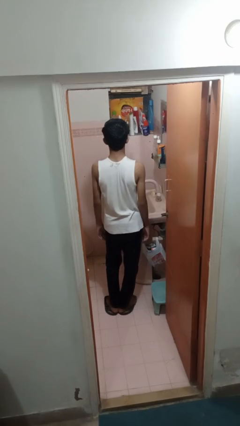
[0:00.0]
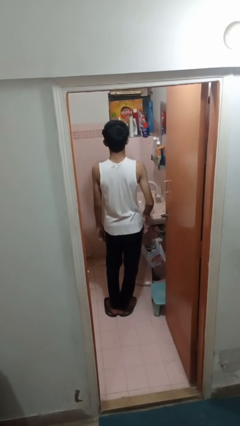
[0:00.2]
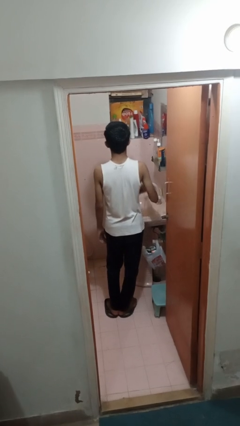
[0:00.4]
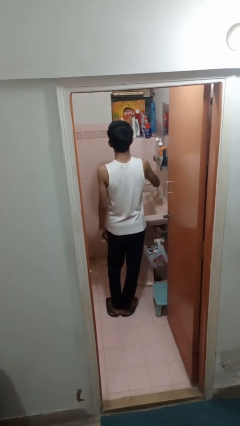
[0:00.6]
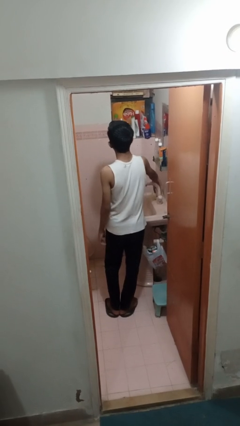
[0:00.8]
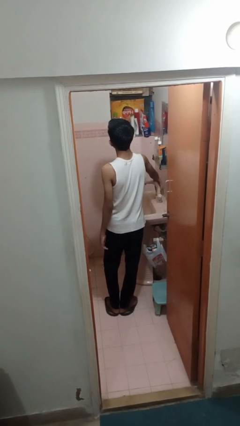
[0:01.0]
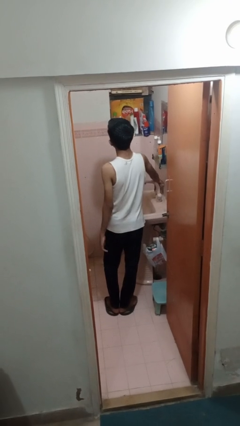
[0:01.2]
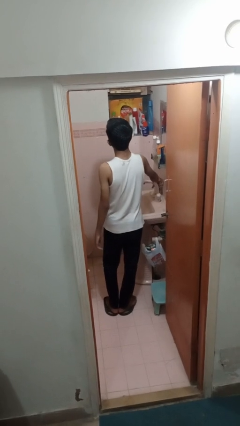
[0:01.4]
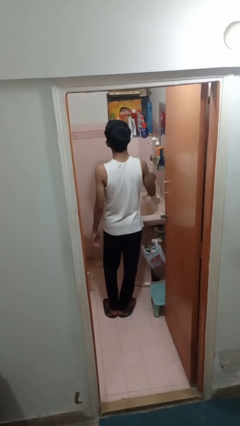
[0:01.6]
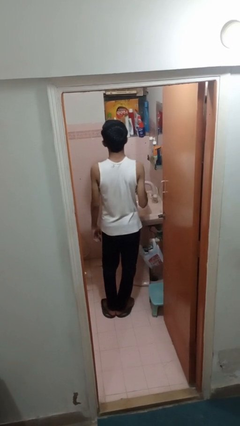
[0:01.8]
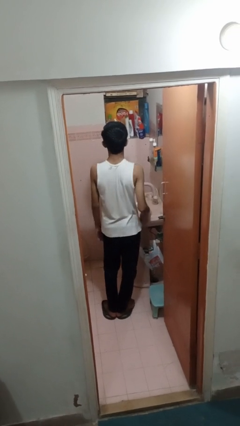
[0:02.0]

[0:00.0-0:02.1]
person turns off faucet

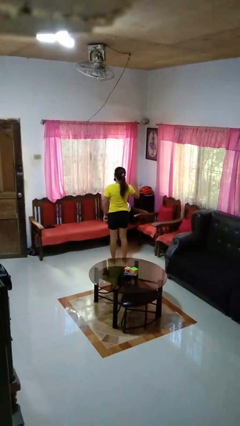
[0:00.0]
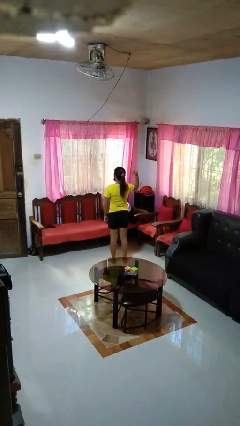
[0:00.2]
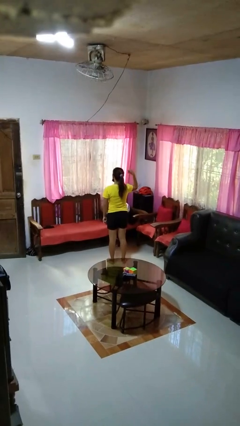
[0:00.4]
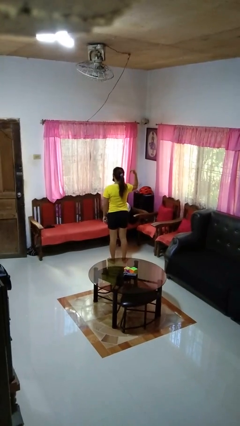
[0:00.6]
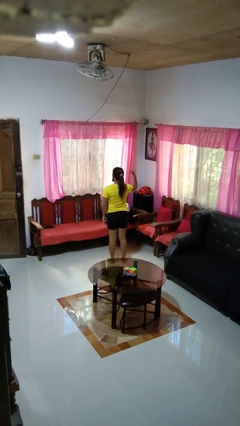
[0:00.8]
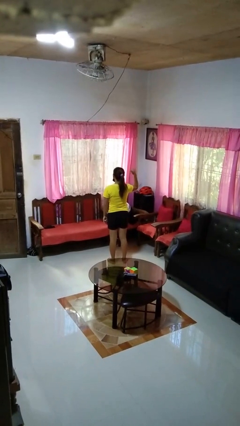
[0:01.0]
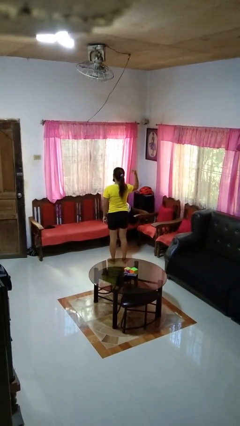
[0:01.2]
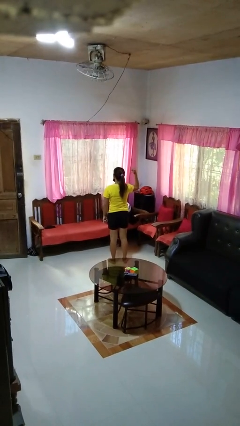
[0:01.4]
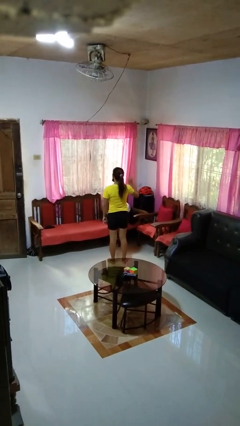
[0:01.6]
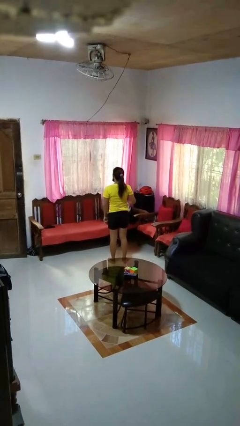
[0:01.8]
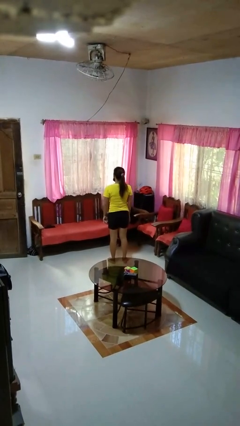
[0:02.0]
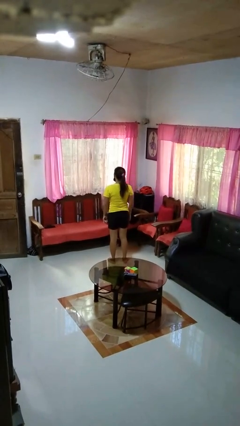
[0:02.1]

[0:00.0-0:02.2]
person gestures hang loose

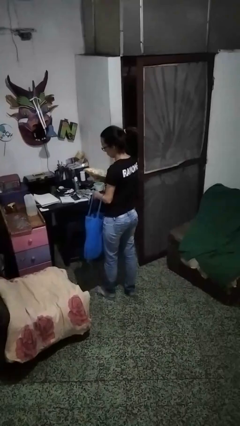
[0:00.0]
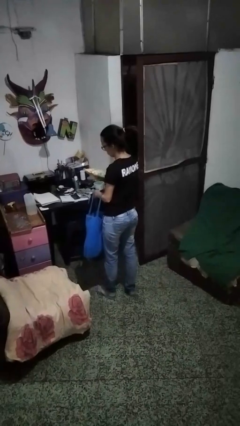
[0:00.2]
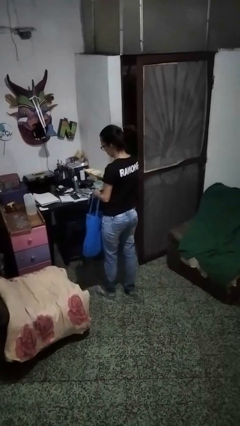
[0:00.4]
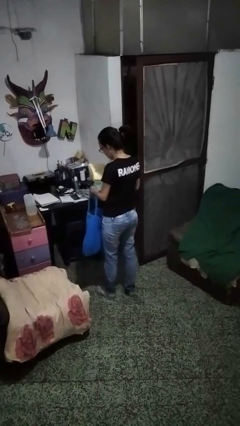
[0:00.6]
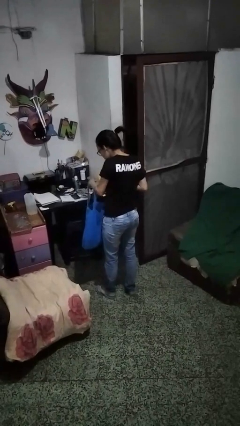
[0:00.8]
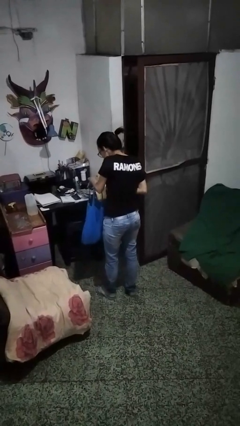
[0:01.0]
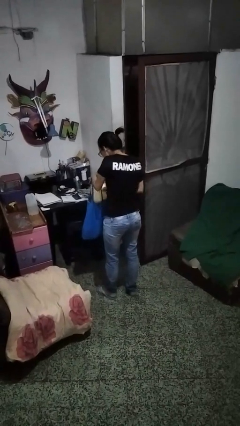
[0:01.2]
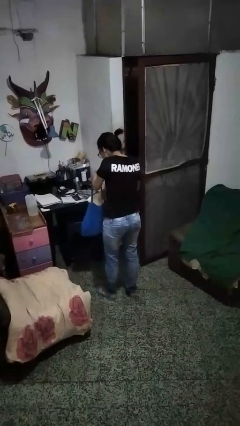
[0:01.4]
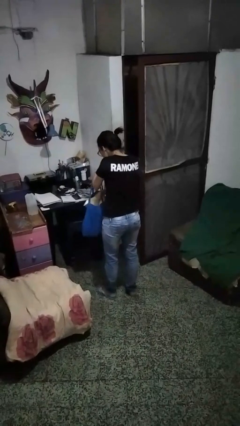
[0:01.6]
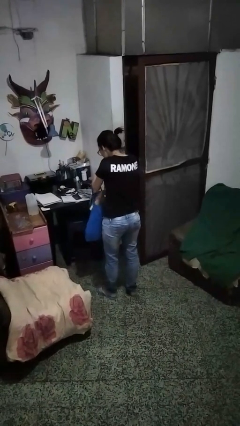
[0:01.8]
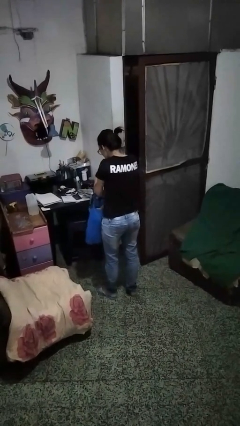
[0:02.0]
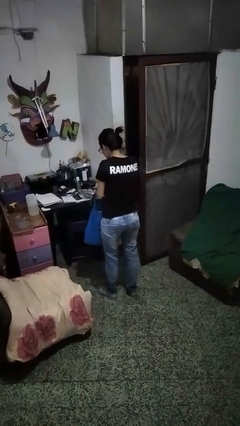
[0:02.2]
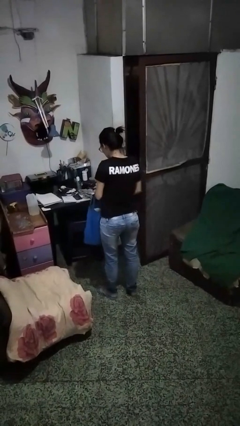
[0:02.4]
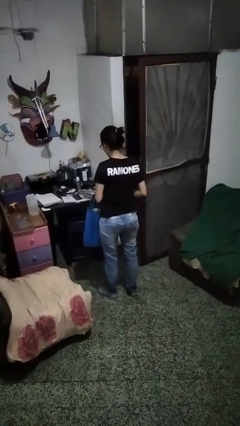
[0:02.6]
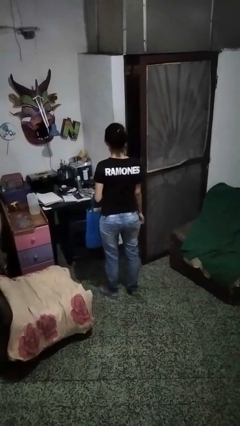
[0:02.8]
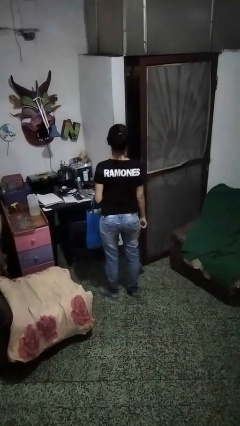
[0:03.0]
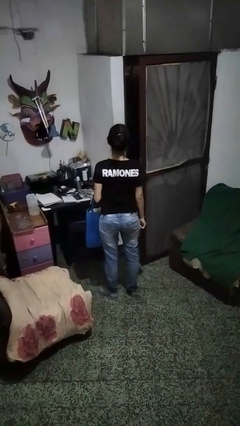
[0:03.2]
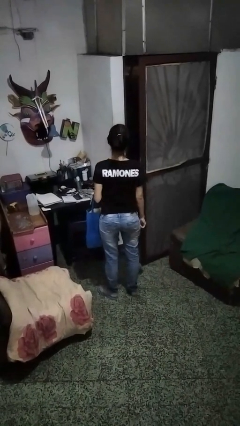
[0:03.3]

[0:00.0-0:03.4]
person puts object into bag

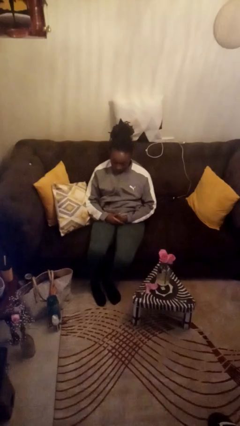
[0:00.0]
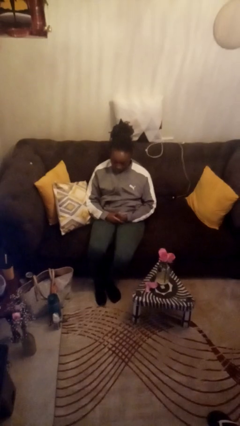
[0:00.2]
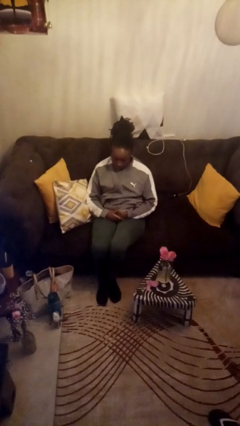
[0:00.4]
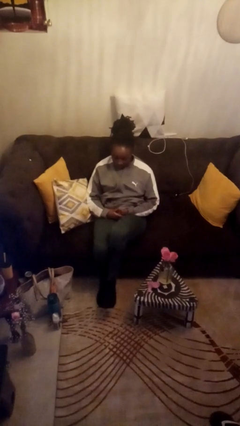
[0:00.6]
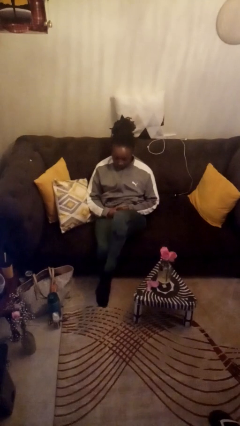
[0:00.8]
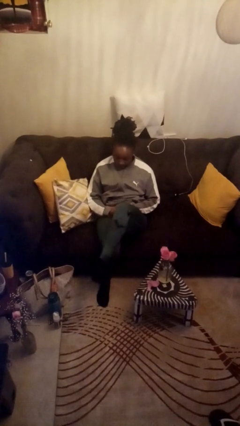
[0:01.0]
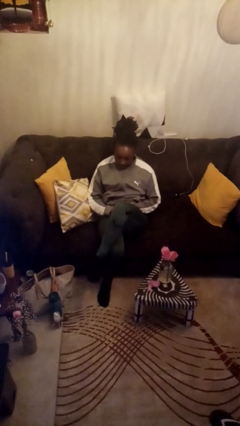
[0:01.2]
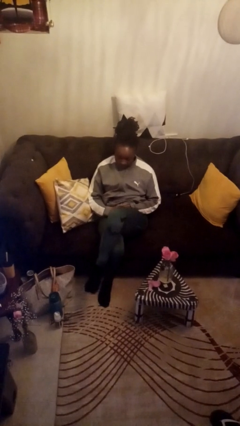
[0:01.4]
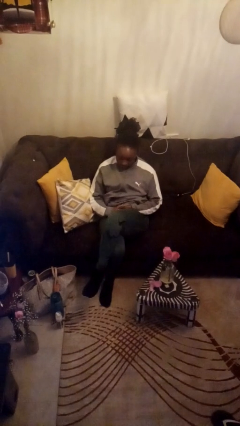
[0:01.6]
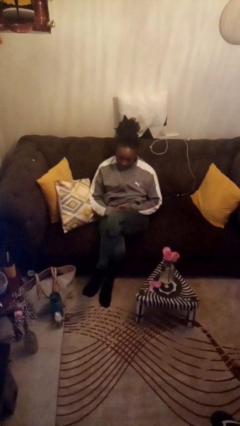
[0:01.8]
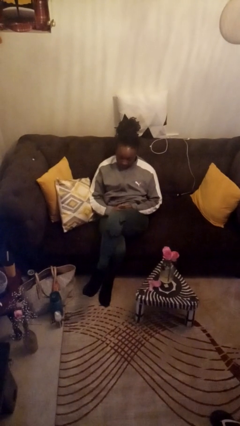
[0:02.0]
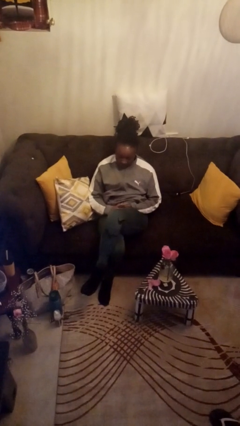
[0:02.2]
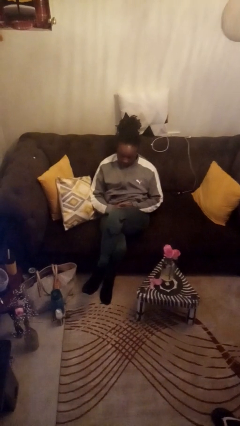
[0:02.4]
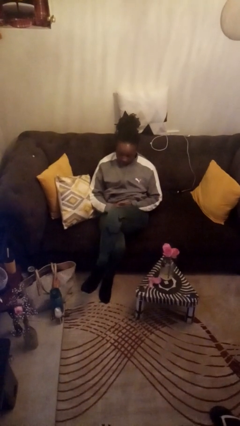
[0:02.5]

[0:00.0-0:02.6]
person crosses legs

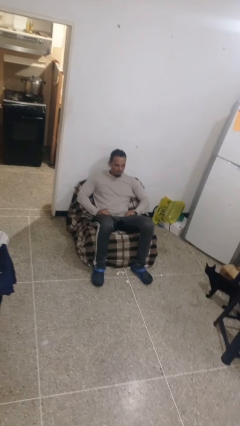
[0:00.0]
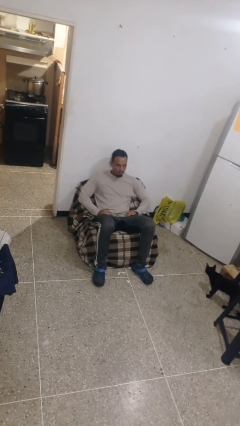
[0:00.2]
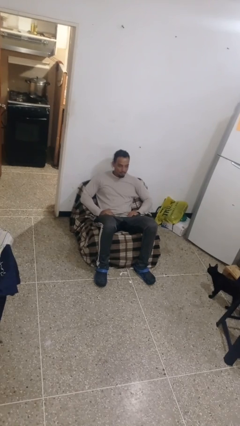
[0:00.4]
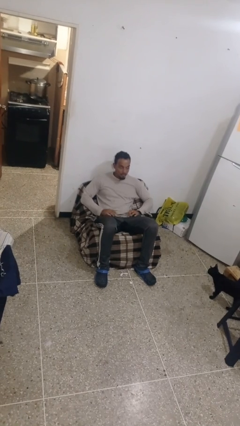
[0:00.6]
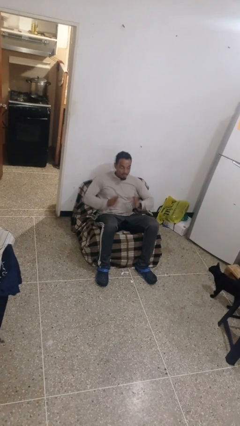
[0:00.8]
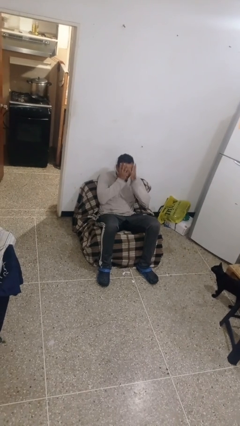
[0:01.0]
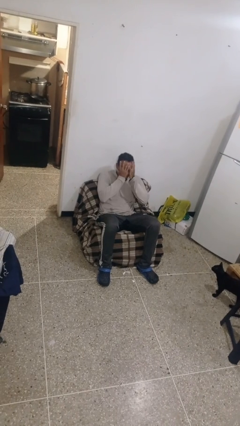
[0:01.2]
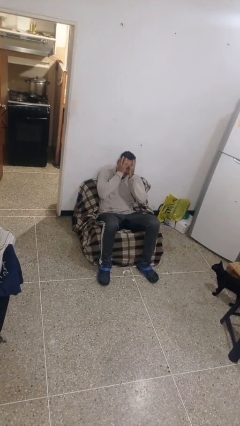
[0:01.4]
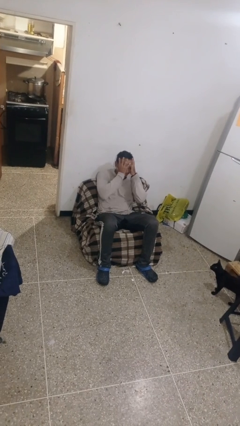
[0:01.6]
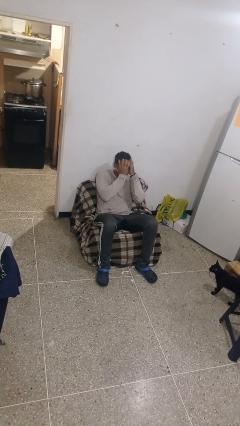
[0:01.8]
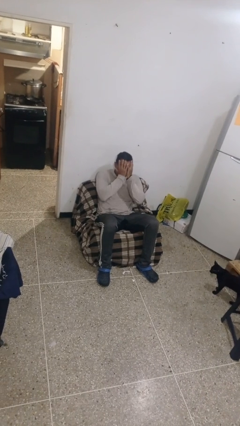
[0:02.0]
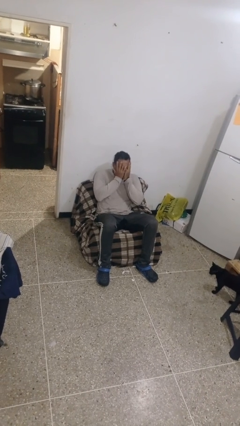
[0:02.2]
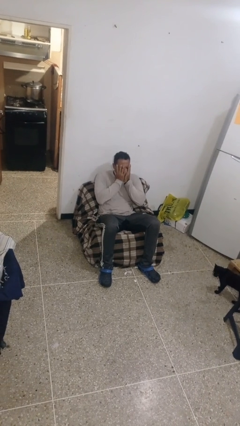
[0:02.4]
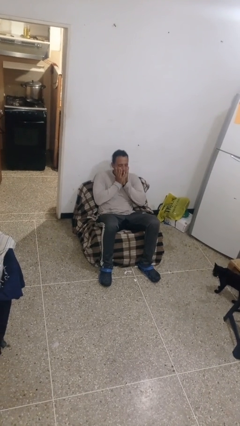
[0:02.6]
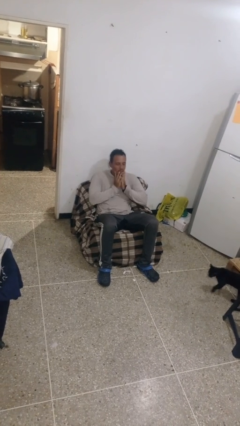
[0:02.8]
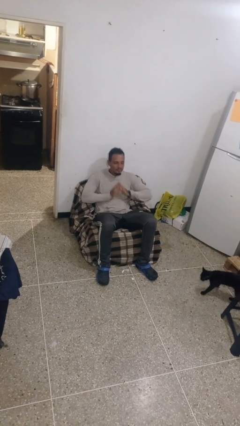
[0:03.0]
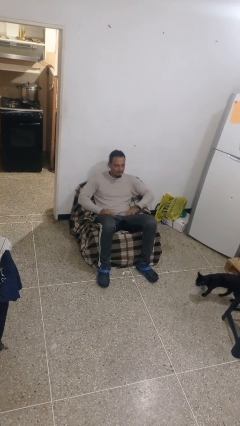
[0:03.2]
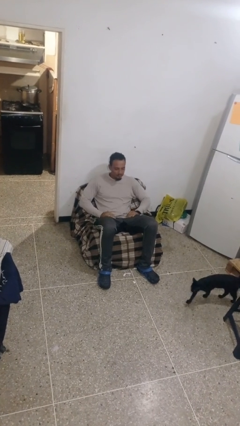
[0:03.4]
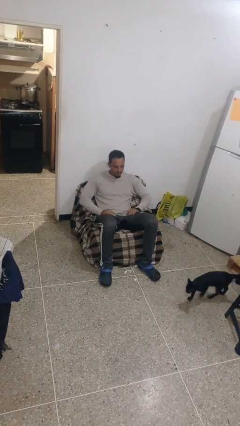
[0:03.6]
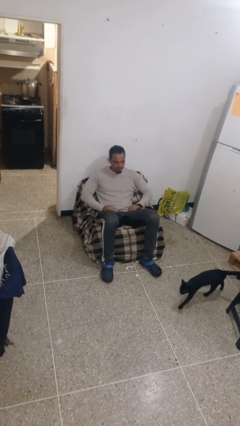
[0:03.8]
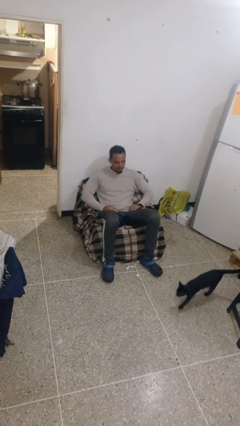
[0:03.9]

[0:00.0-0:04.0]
person covers face with hands

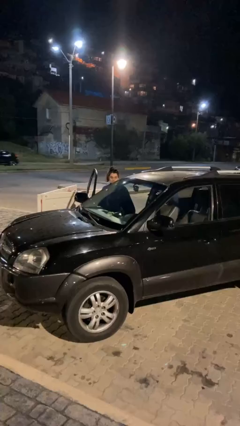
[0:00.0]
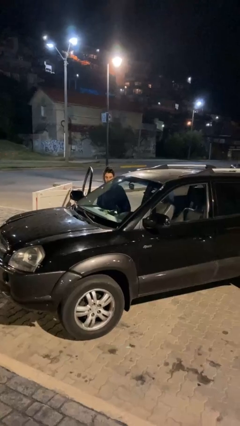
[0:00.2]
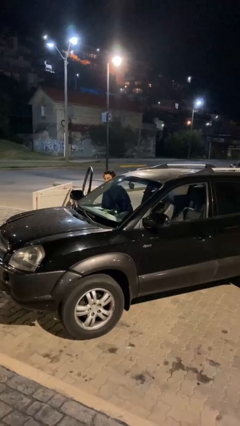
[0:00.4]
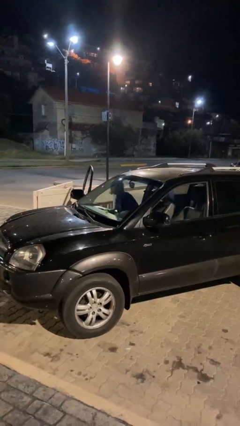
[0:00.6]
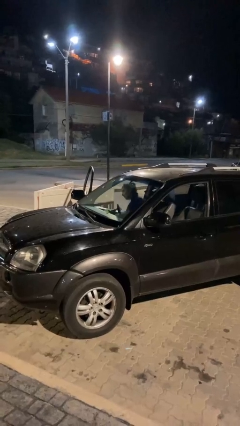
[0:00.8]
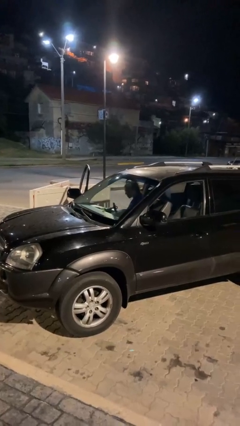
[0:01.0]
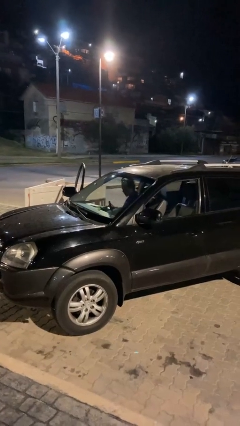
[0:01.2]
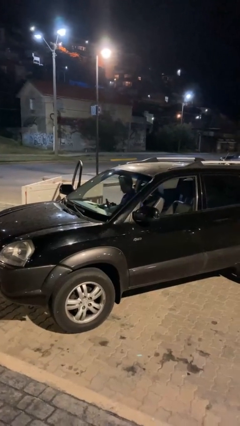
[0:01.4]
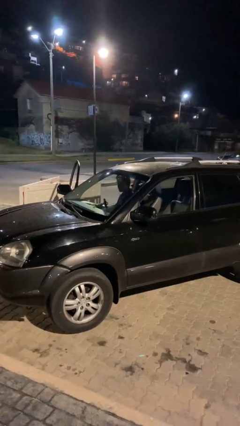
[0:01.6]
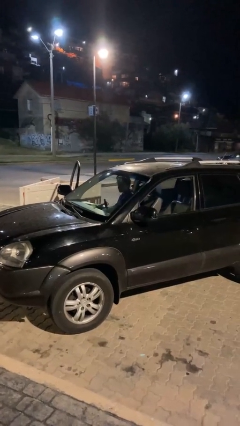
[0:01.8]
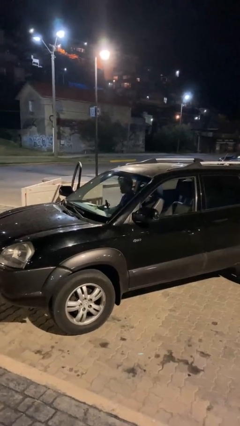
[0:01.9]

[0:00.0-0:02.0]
person enters car

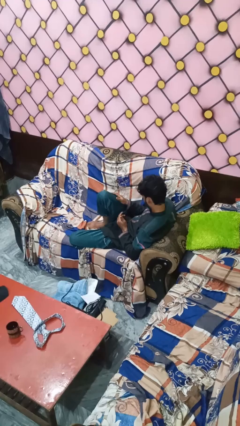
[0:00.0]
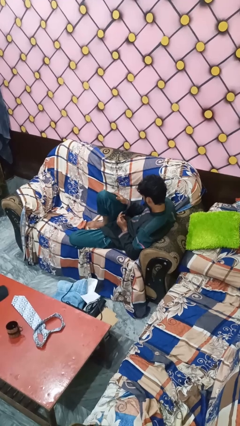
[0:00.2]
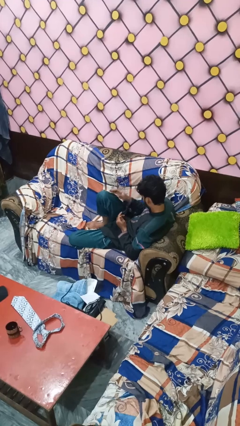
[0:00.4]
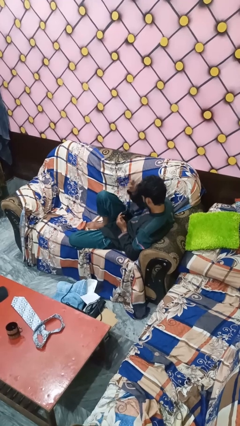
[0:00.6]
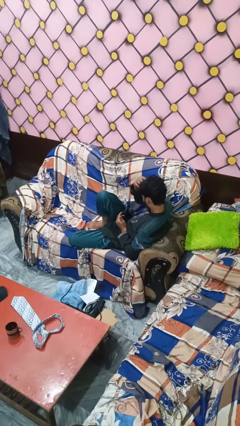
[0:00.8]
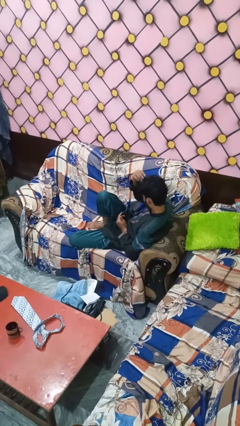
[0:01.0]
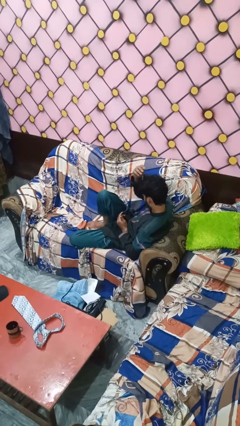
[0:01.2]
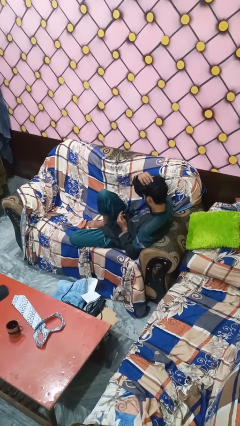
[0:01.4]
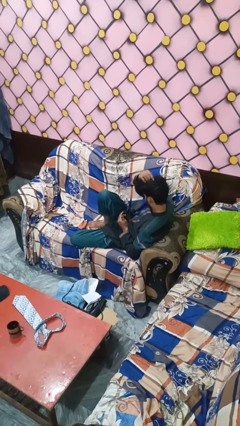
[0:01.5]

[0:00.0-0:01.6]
person strokes hair
